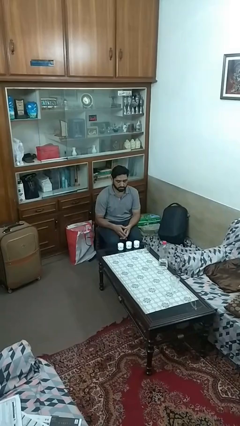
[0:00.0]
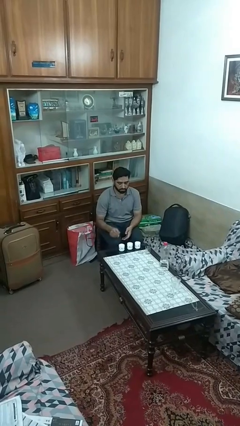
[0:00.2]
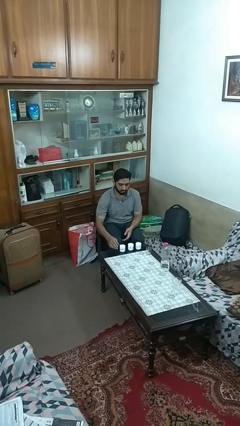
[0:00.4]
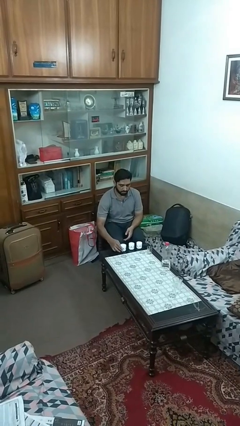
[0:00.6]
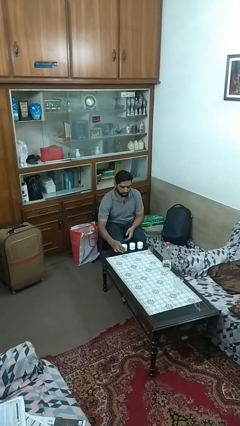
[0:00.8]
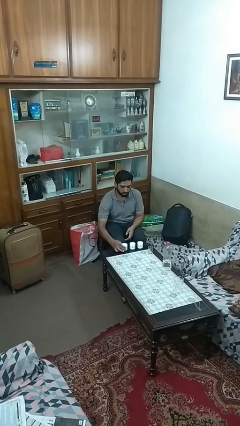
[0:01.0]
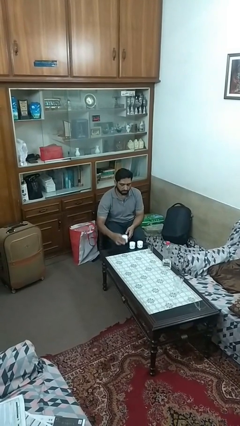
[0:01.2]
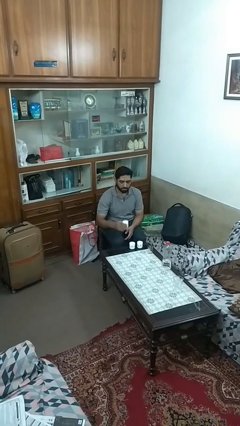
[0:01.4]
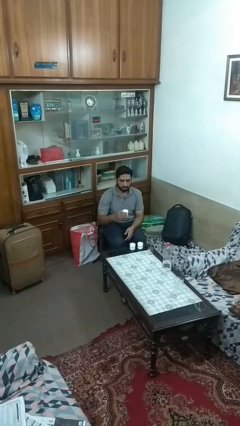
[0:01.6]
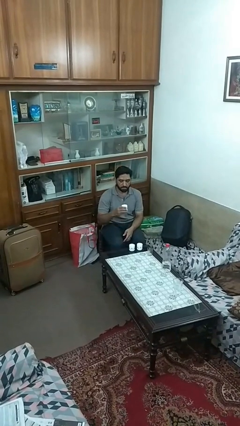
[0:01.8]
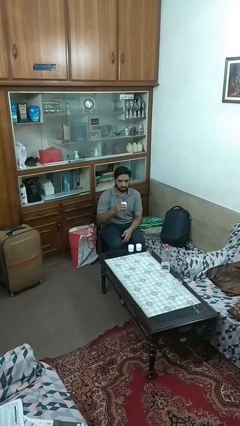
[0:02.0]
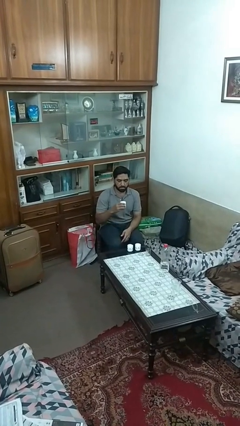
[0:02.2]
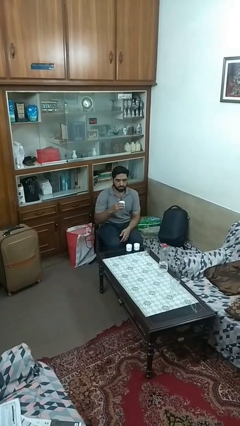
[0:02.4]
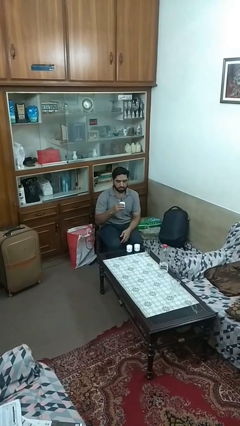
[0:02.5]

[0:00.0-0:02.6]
person picks up object from table

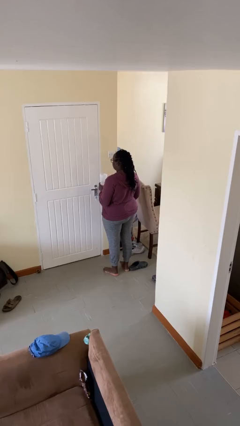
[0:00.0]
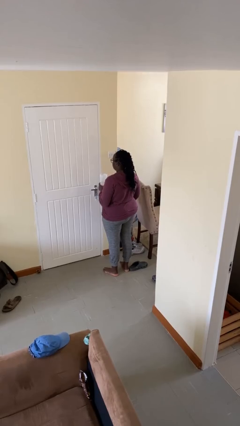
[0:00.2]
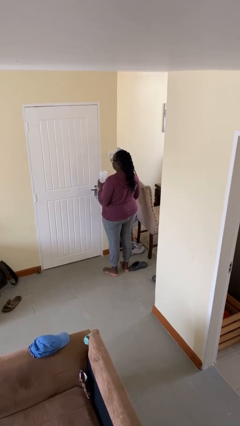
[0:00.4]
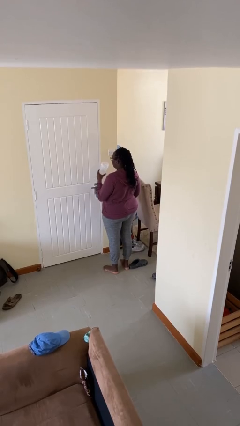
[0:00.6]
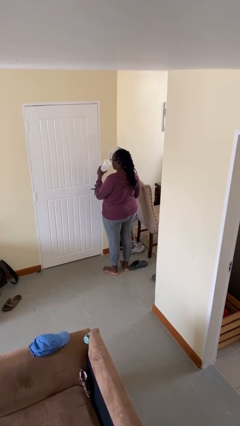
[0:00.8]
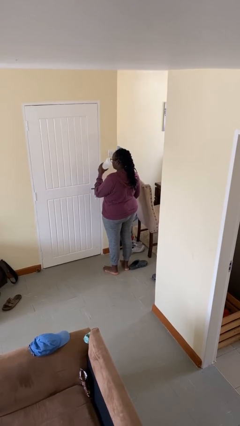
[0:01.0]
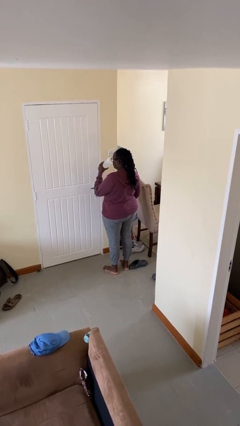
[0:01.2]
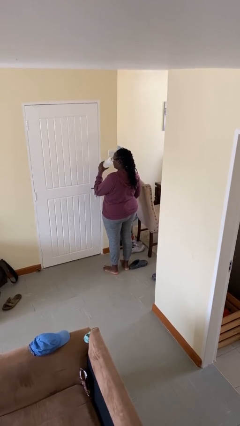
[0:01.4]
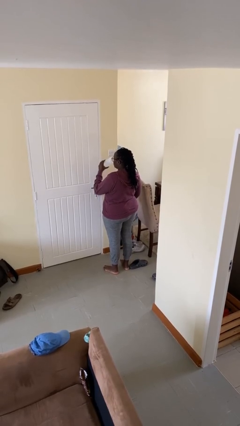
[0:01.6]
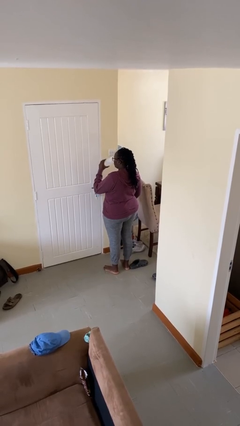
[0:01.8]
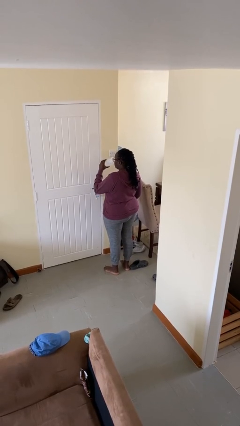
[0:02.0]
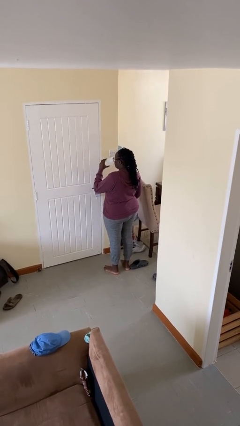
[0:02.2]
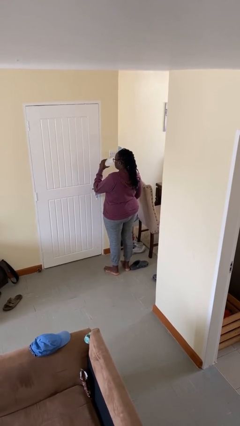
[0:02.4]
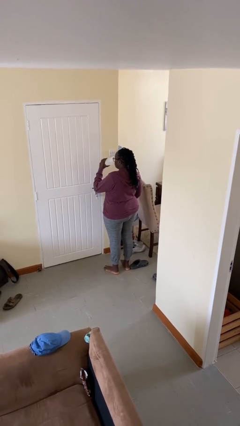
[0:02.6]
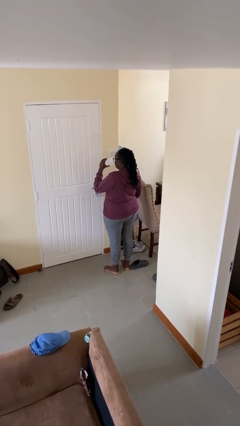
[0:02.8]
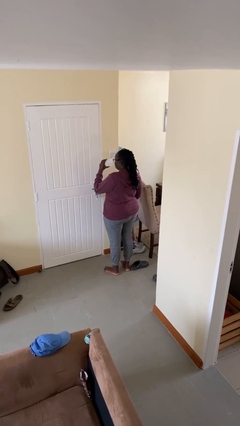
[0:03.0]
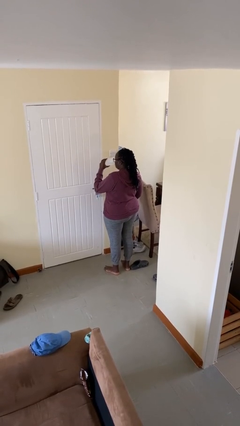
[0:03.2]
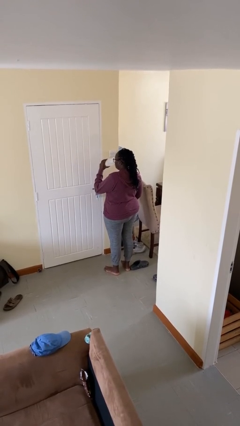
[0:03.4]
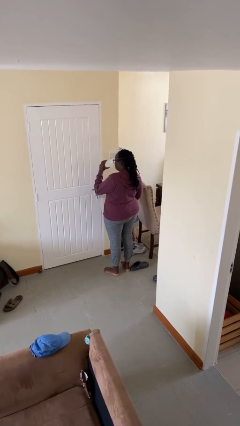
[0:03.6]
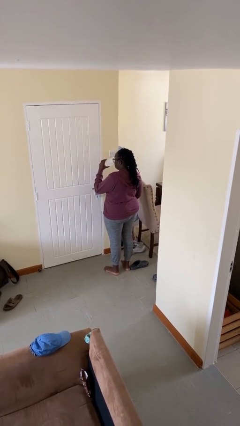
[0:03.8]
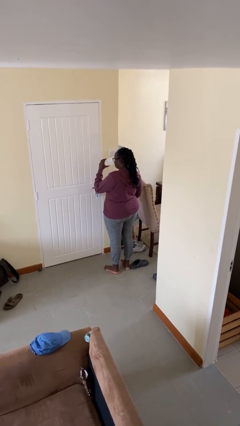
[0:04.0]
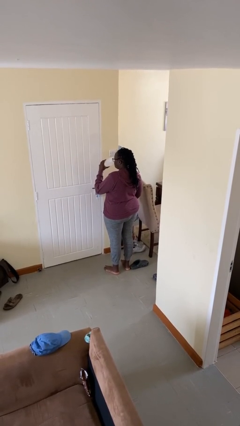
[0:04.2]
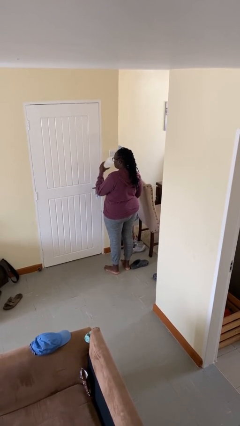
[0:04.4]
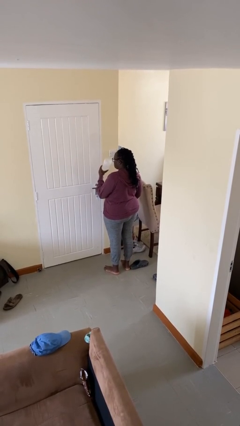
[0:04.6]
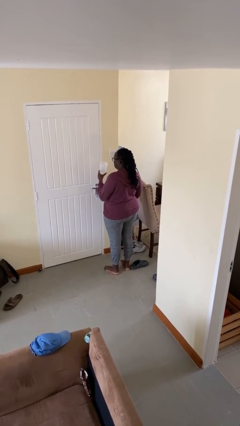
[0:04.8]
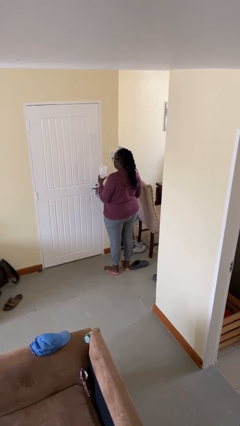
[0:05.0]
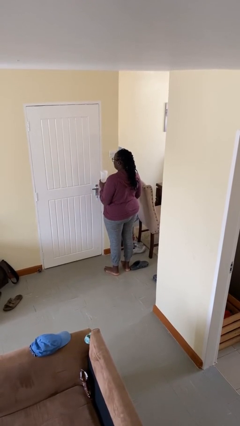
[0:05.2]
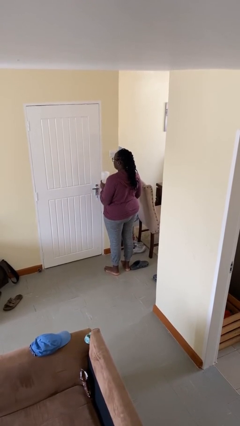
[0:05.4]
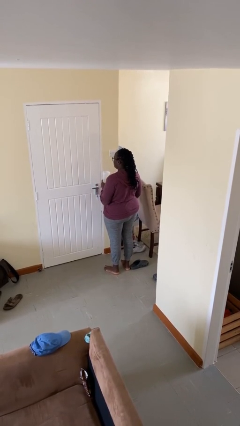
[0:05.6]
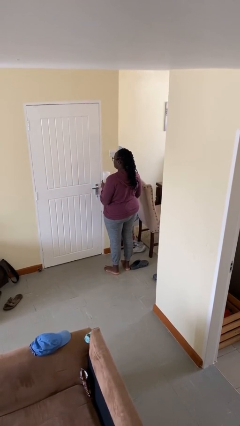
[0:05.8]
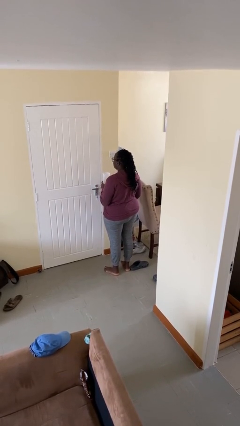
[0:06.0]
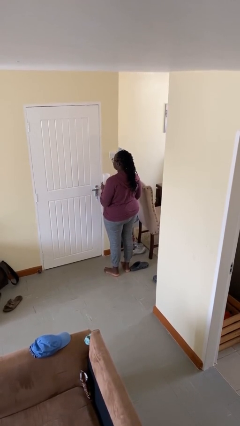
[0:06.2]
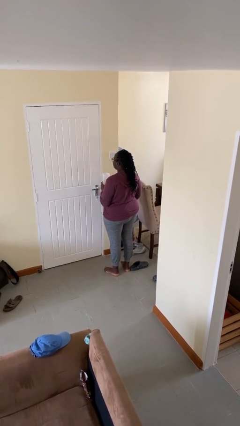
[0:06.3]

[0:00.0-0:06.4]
person drinks from bottle

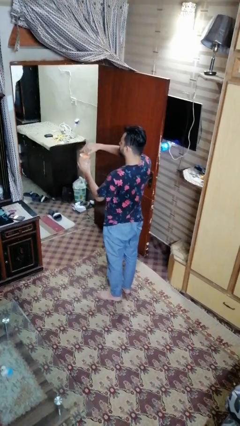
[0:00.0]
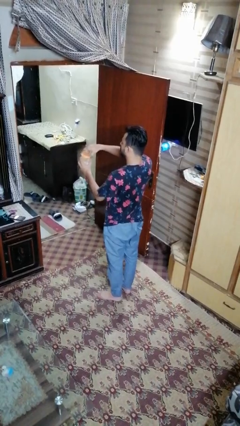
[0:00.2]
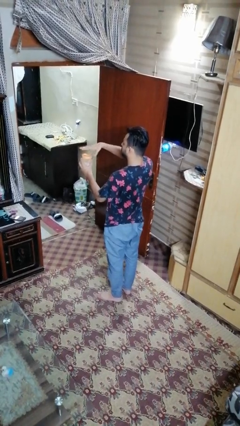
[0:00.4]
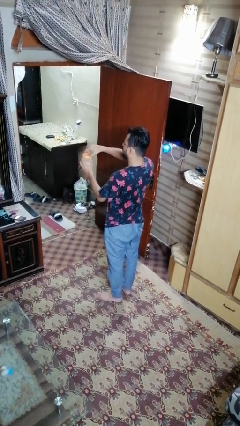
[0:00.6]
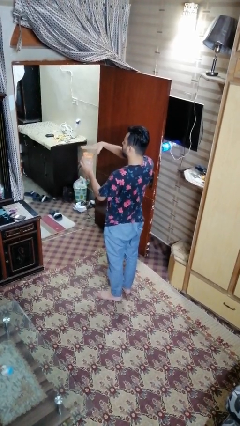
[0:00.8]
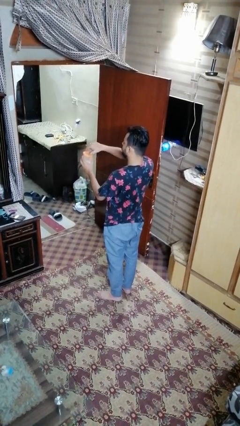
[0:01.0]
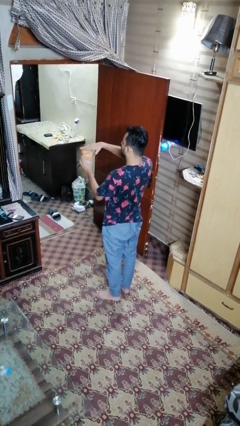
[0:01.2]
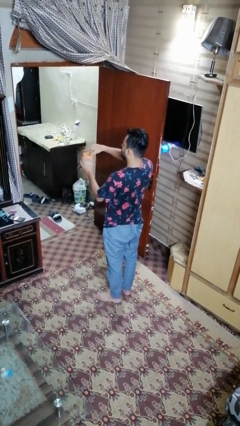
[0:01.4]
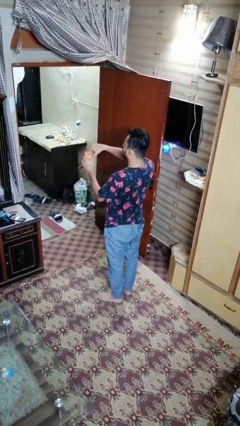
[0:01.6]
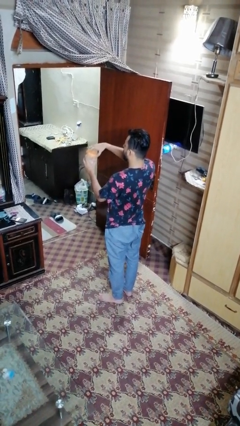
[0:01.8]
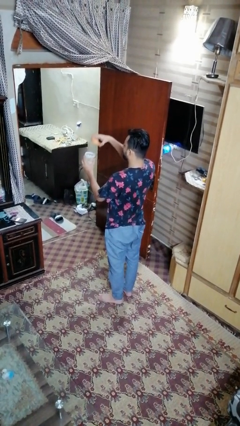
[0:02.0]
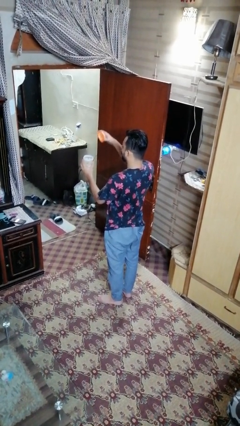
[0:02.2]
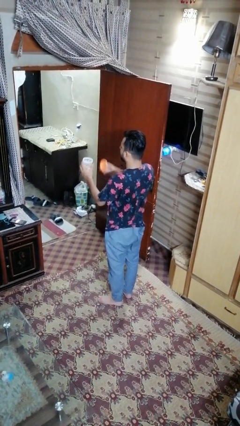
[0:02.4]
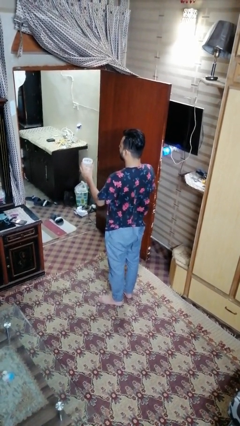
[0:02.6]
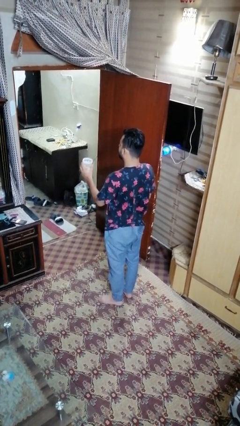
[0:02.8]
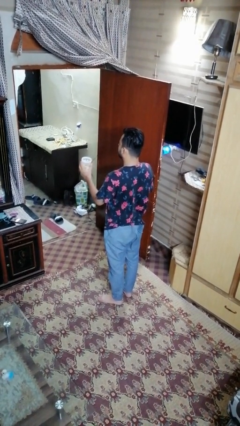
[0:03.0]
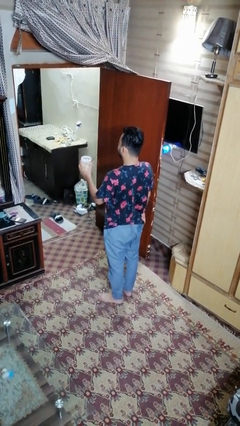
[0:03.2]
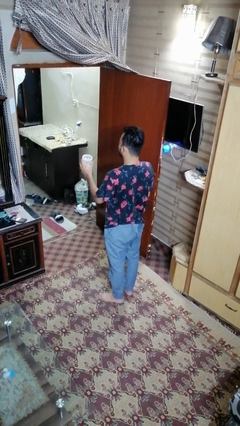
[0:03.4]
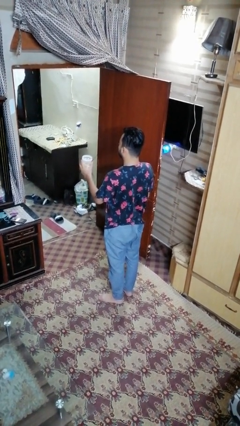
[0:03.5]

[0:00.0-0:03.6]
person opens jar

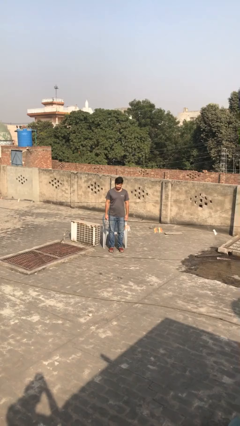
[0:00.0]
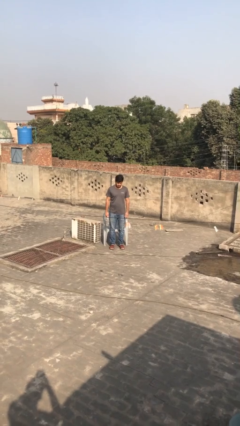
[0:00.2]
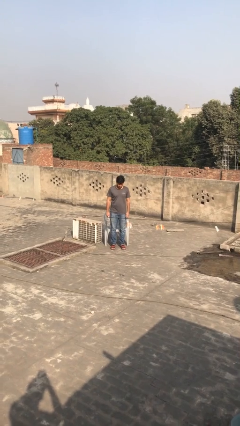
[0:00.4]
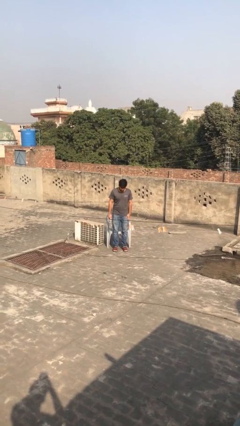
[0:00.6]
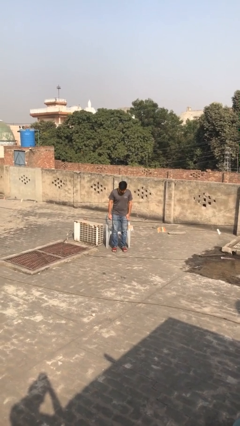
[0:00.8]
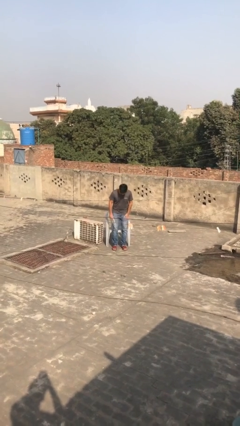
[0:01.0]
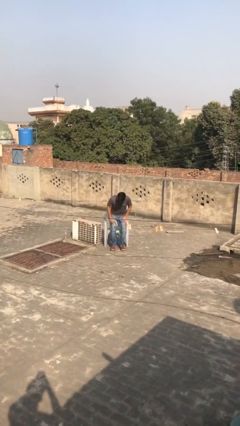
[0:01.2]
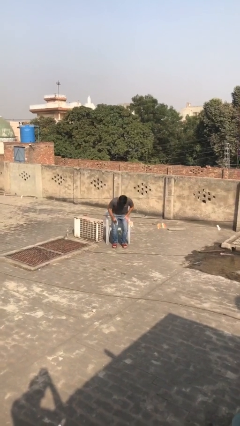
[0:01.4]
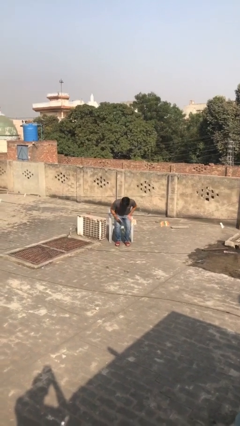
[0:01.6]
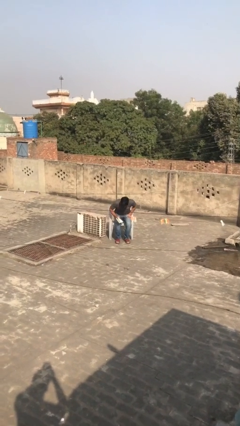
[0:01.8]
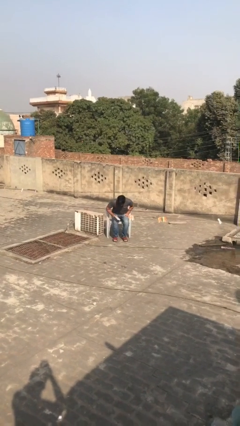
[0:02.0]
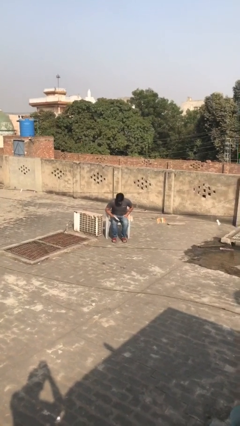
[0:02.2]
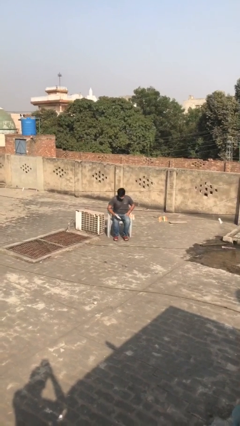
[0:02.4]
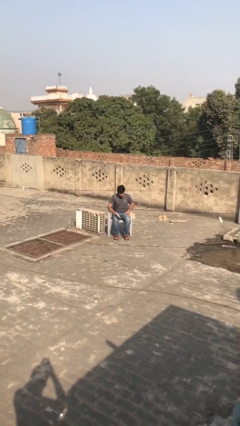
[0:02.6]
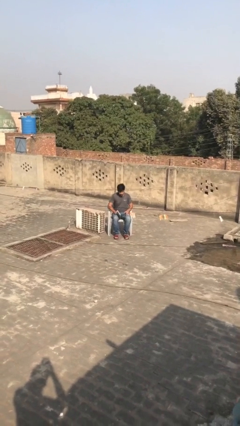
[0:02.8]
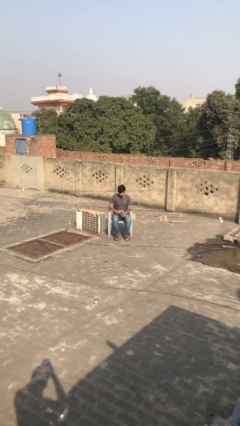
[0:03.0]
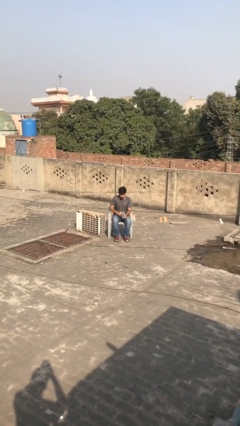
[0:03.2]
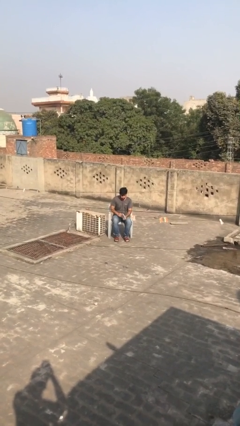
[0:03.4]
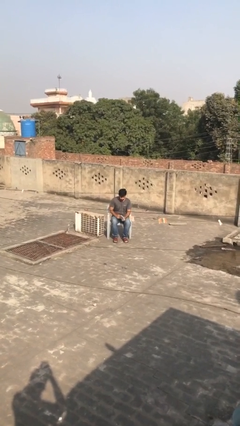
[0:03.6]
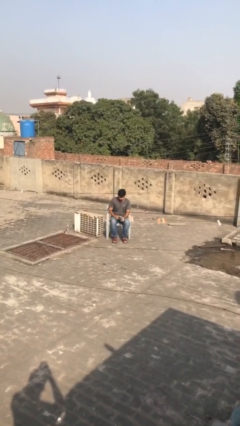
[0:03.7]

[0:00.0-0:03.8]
person sits down

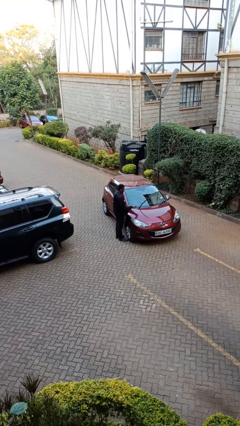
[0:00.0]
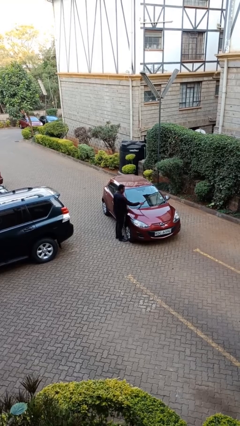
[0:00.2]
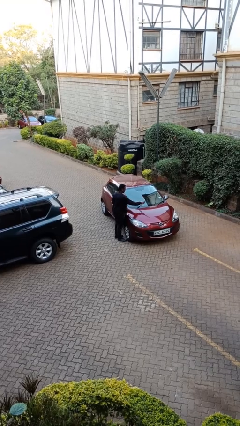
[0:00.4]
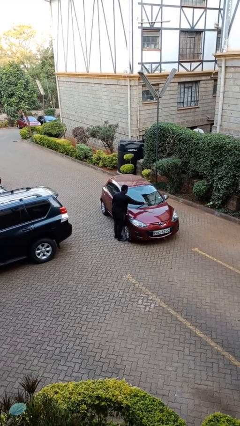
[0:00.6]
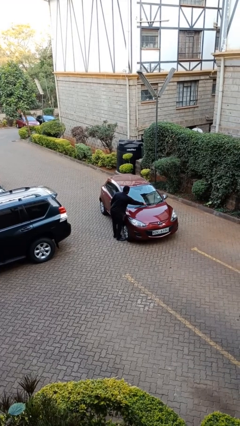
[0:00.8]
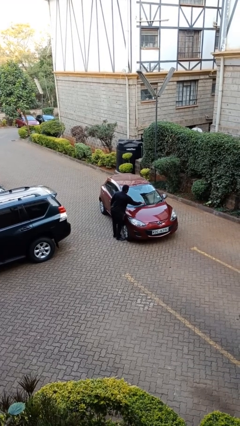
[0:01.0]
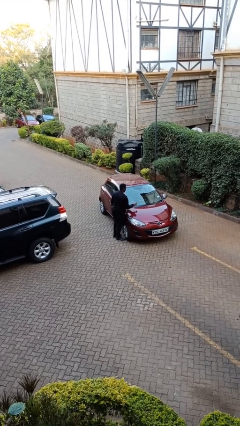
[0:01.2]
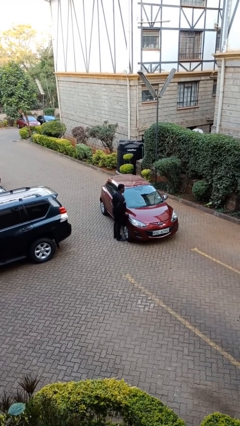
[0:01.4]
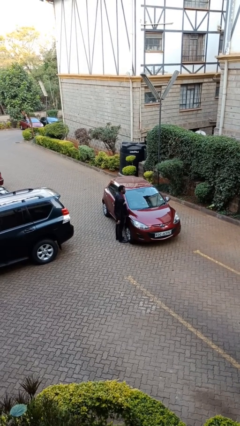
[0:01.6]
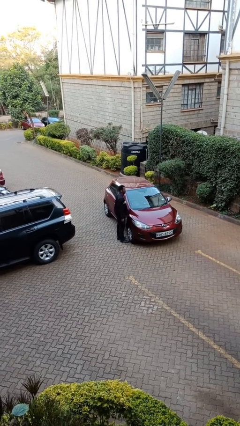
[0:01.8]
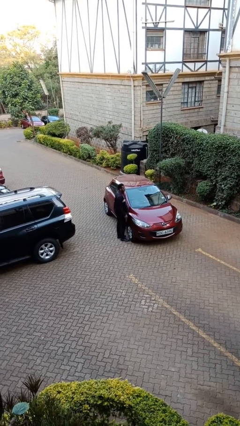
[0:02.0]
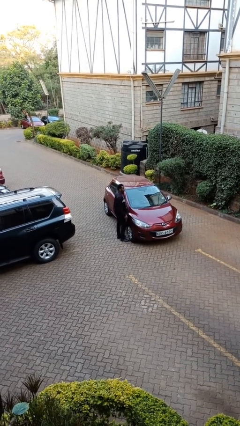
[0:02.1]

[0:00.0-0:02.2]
person flips down car wipers
